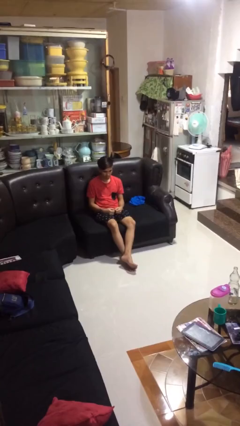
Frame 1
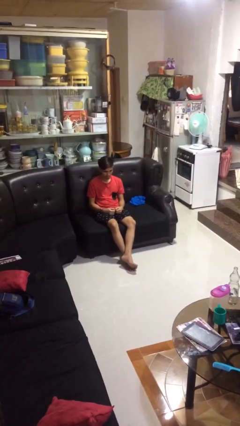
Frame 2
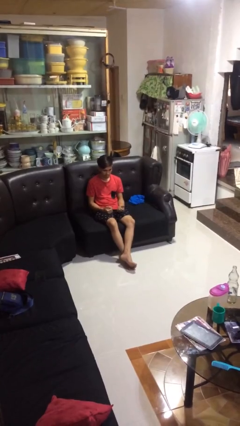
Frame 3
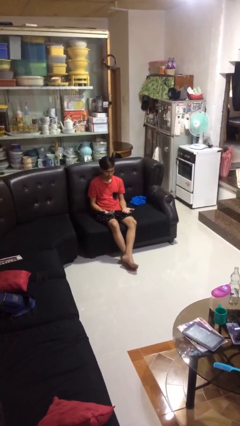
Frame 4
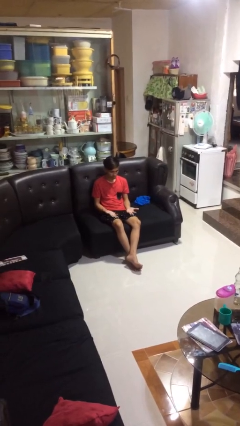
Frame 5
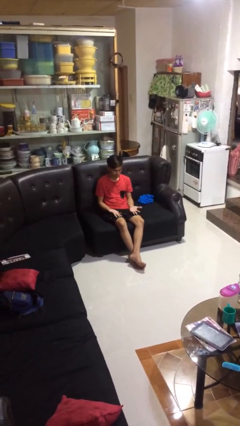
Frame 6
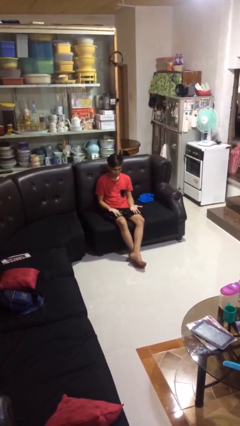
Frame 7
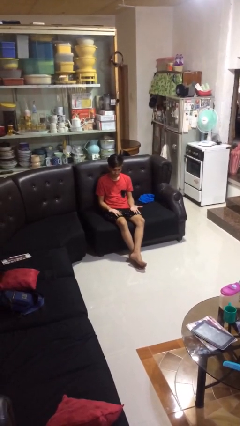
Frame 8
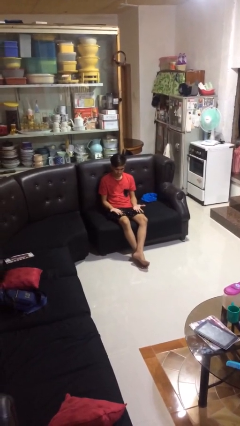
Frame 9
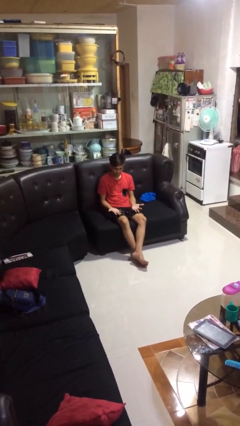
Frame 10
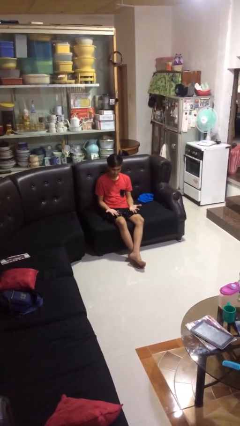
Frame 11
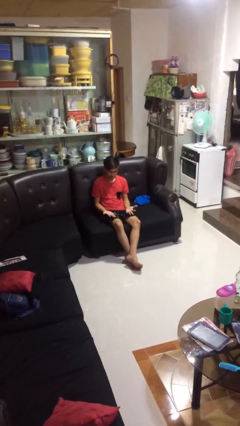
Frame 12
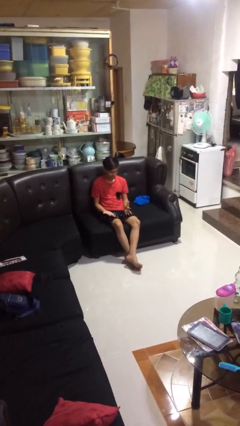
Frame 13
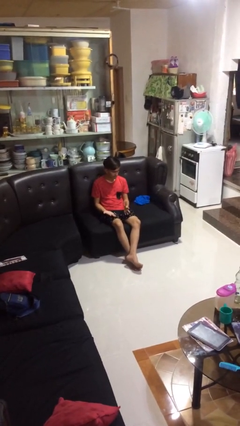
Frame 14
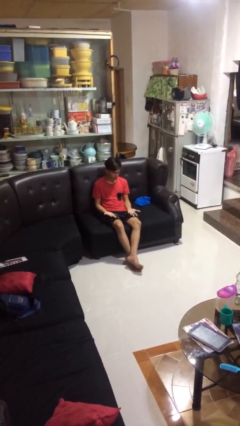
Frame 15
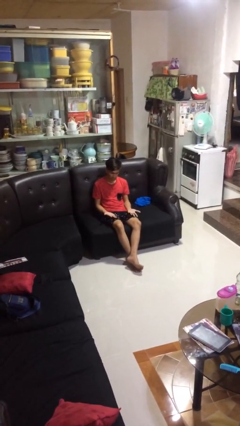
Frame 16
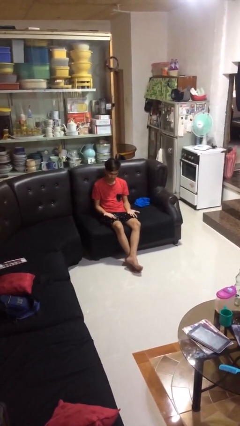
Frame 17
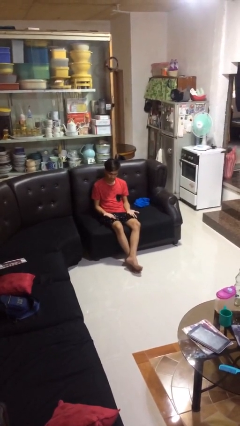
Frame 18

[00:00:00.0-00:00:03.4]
person looks at hands in lap

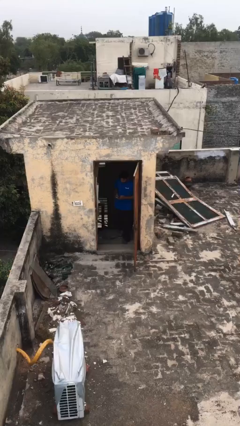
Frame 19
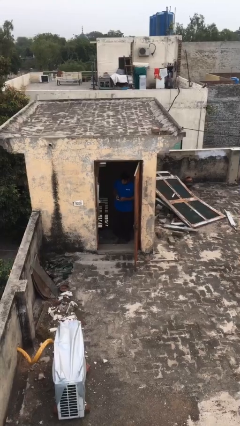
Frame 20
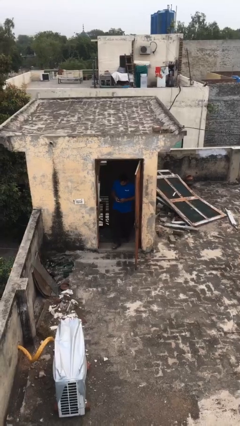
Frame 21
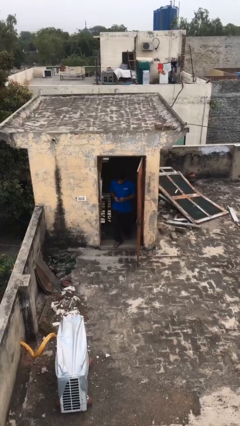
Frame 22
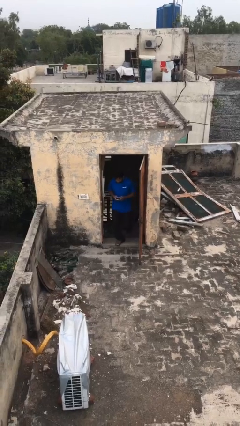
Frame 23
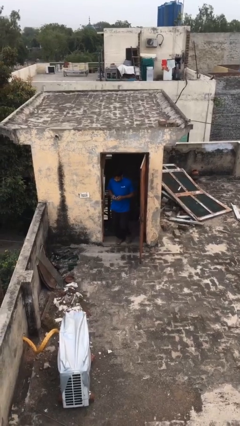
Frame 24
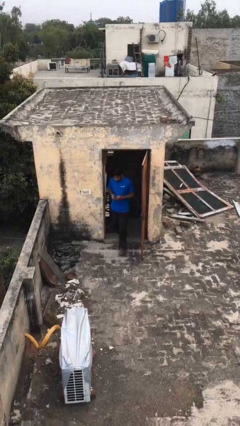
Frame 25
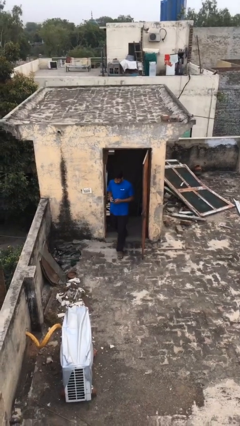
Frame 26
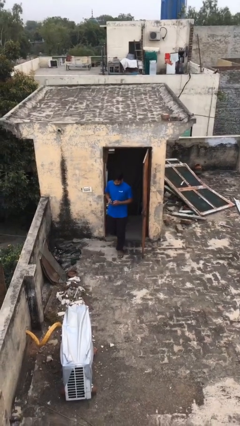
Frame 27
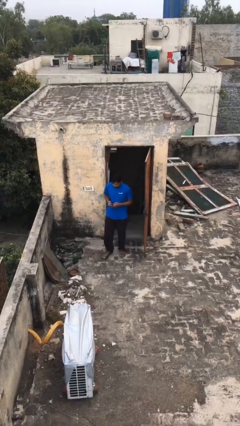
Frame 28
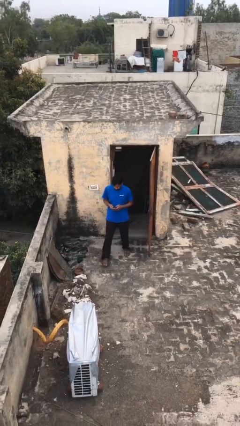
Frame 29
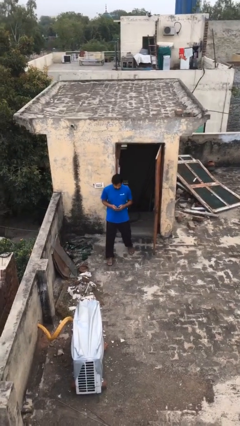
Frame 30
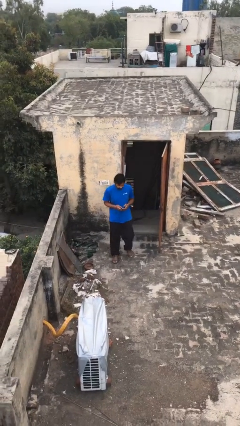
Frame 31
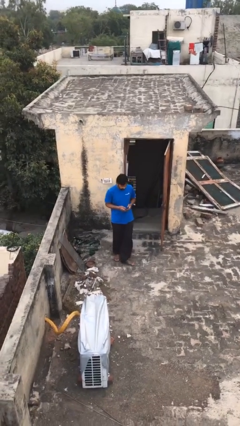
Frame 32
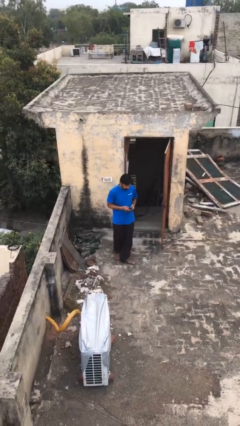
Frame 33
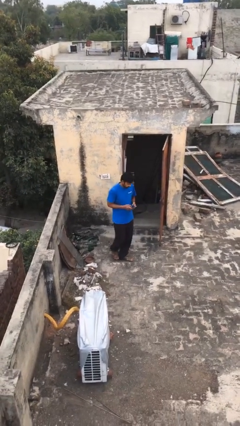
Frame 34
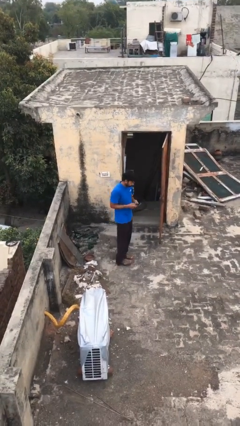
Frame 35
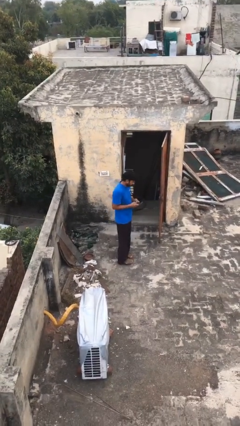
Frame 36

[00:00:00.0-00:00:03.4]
person enters scene through structure

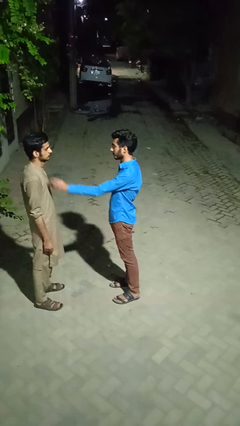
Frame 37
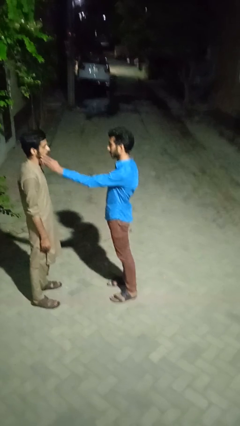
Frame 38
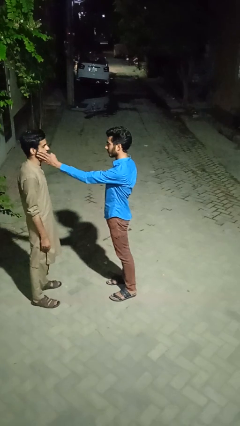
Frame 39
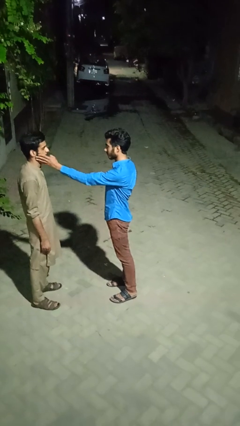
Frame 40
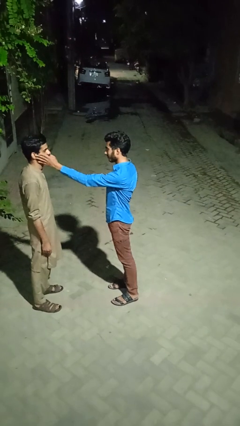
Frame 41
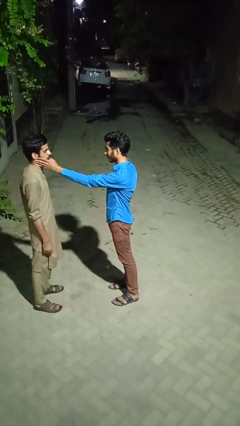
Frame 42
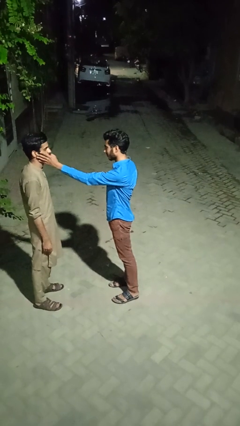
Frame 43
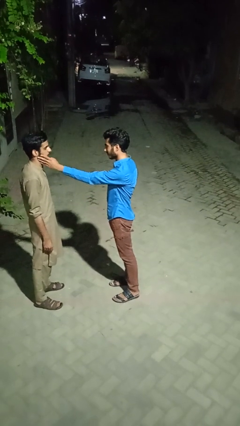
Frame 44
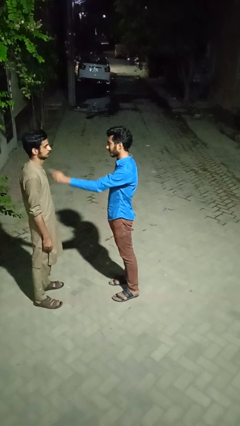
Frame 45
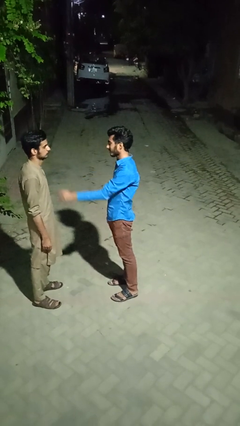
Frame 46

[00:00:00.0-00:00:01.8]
person touches face of person

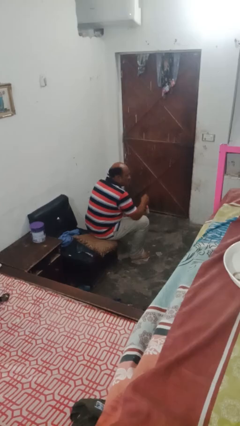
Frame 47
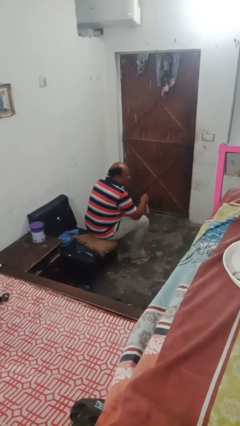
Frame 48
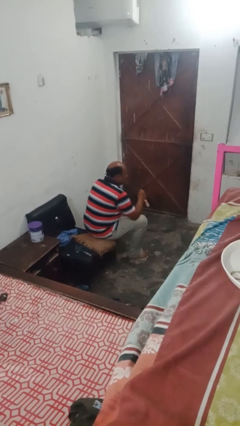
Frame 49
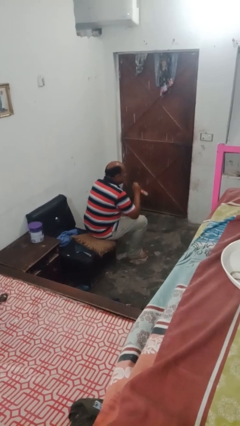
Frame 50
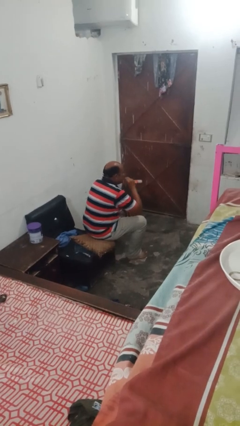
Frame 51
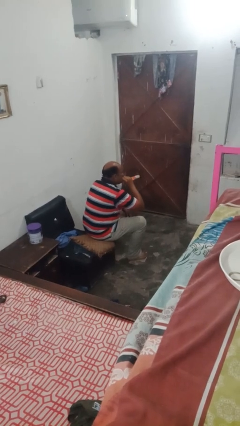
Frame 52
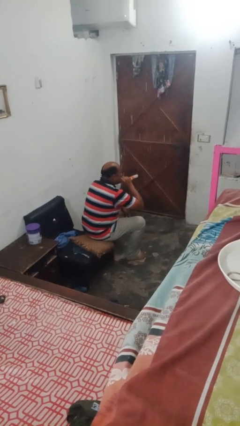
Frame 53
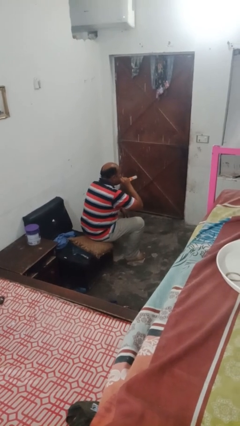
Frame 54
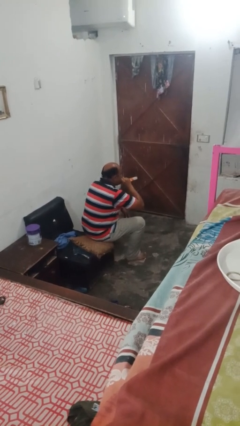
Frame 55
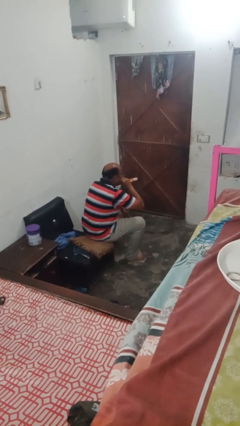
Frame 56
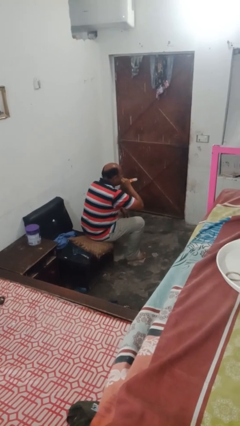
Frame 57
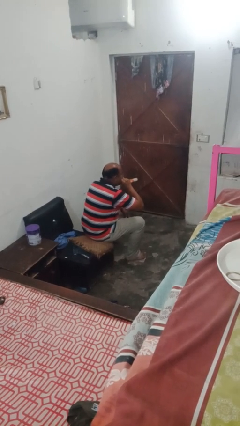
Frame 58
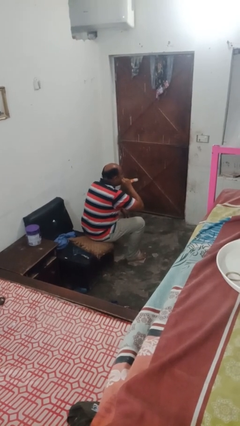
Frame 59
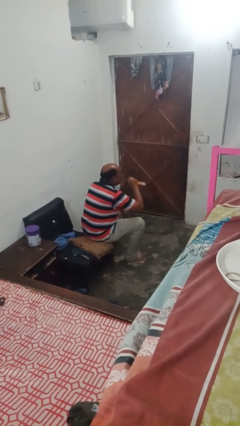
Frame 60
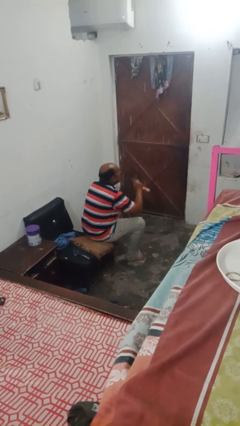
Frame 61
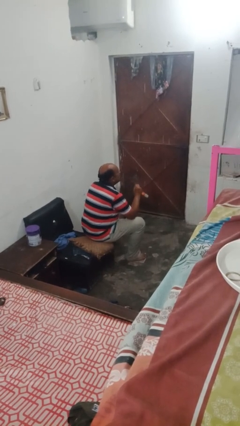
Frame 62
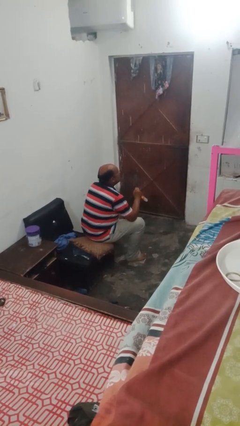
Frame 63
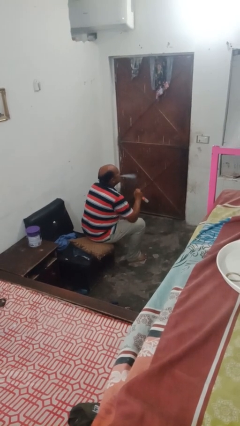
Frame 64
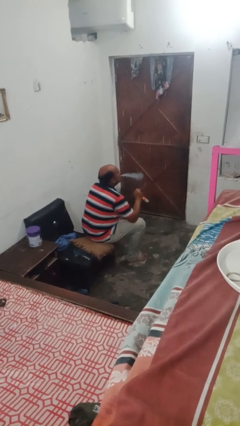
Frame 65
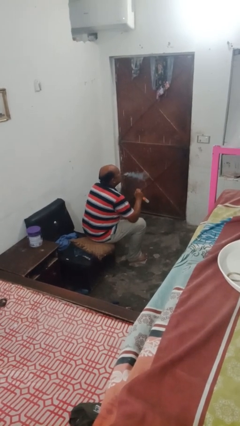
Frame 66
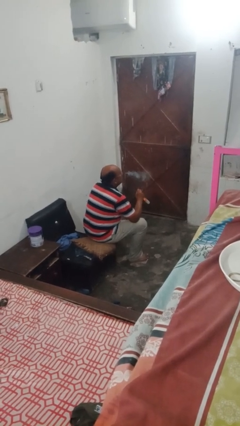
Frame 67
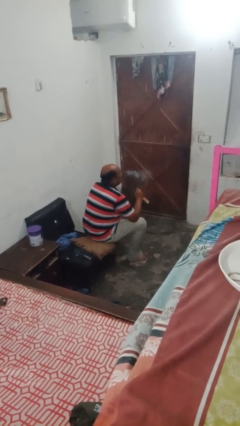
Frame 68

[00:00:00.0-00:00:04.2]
person vapes

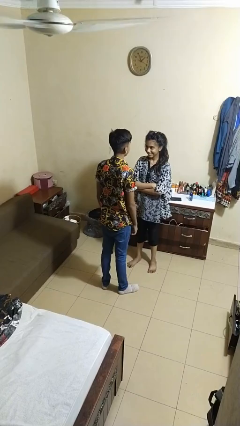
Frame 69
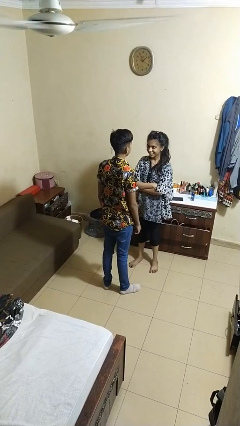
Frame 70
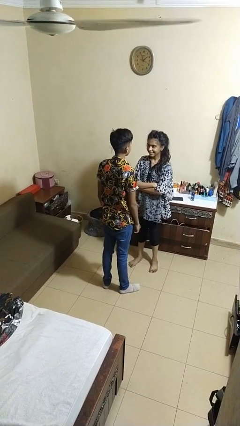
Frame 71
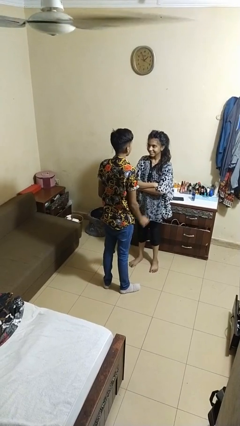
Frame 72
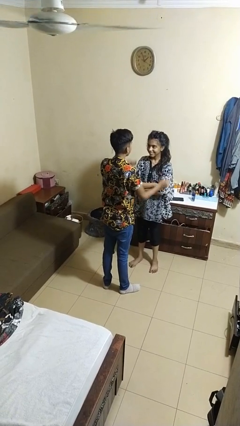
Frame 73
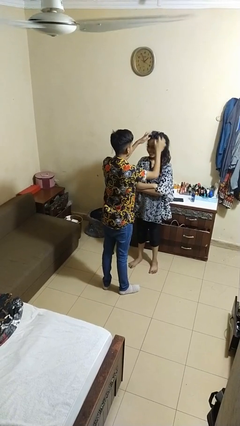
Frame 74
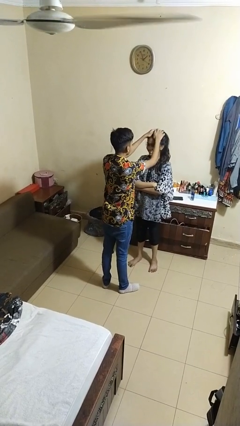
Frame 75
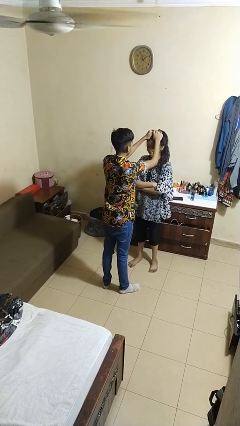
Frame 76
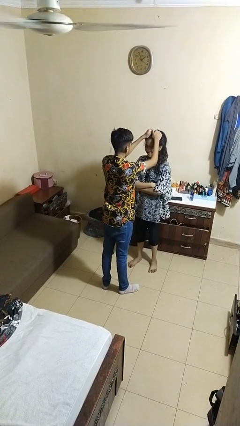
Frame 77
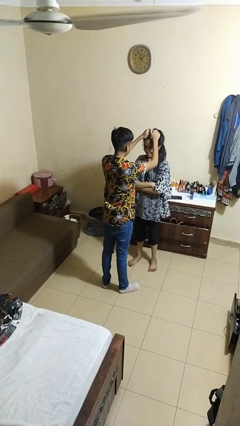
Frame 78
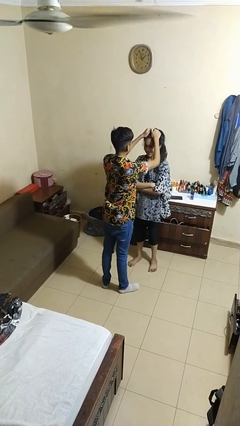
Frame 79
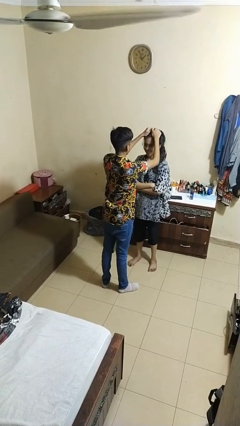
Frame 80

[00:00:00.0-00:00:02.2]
person grabs person by hair

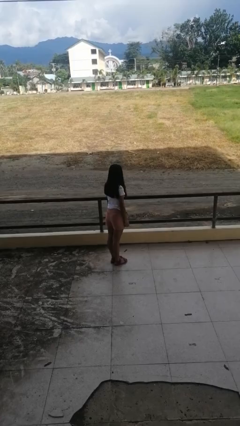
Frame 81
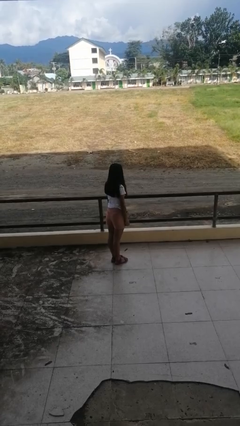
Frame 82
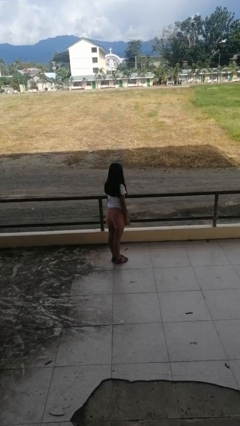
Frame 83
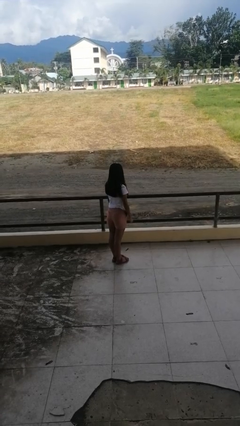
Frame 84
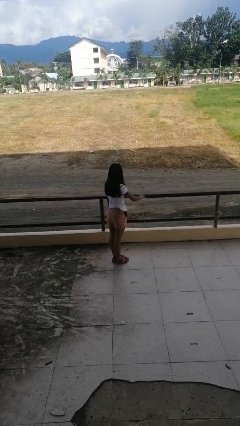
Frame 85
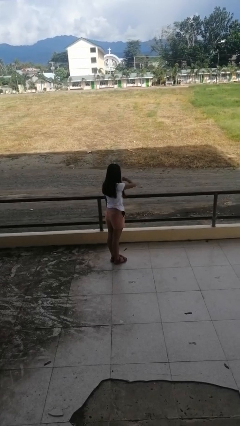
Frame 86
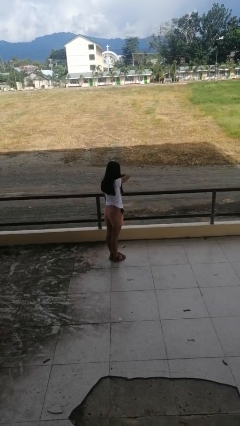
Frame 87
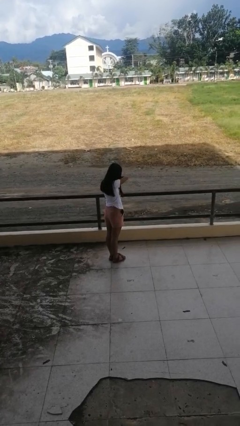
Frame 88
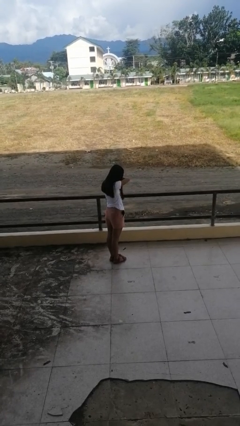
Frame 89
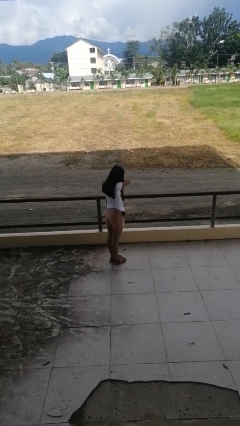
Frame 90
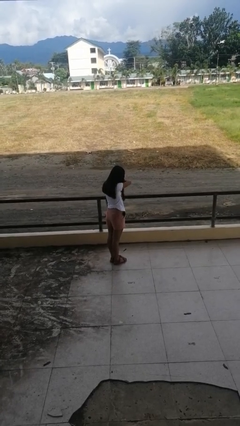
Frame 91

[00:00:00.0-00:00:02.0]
person sneezes into arm
